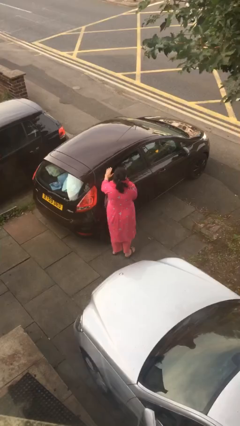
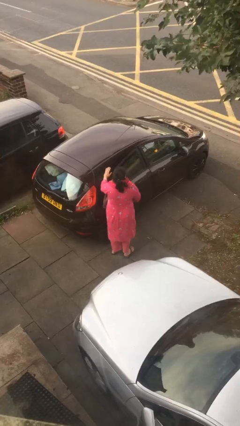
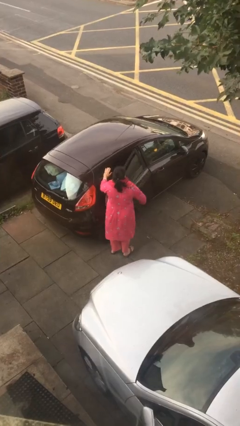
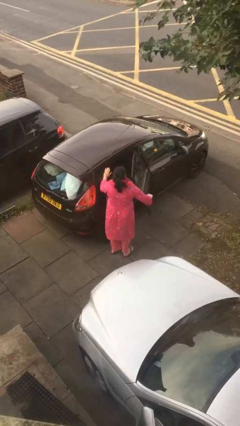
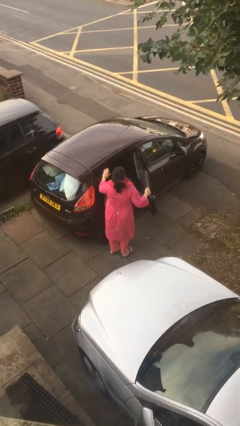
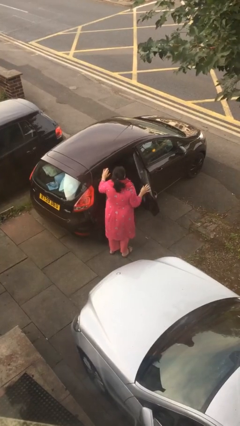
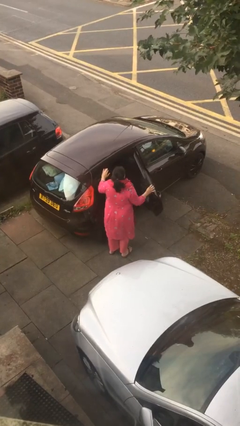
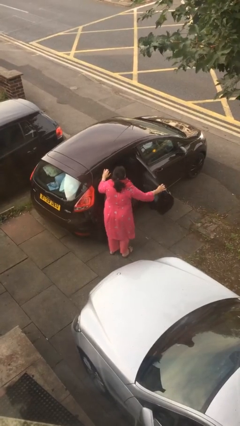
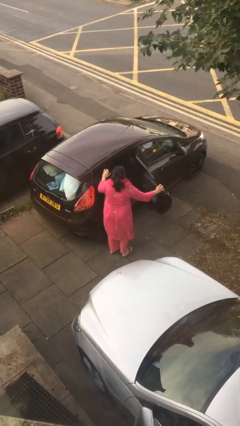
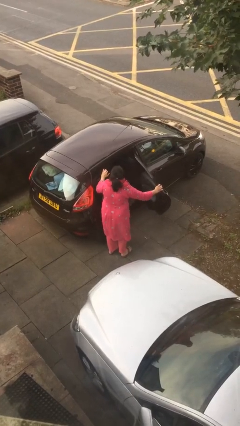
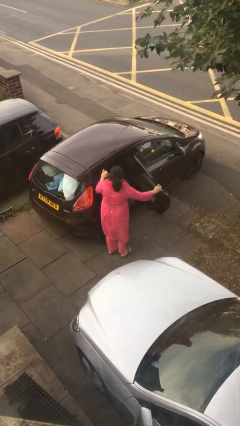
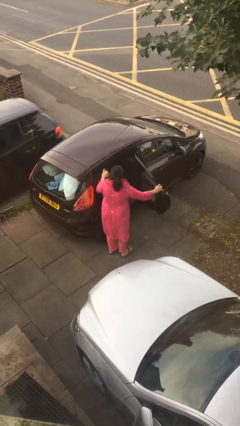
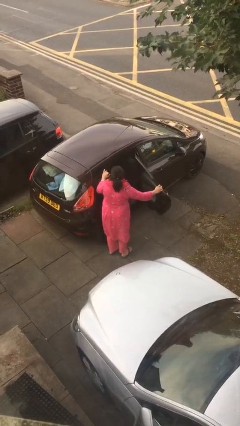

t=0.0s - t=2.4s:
person opens car door

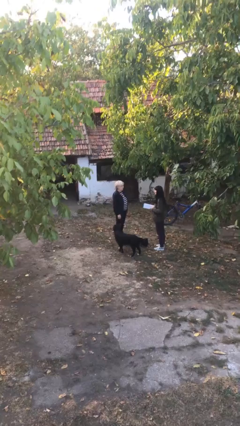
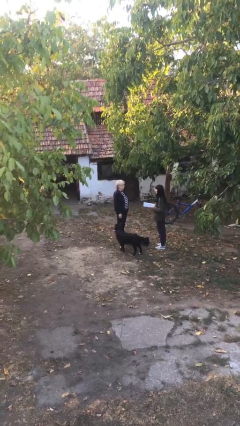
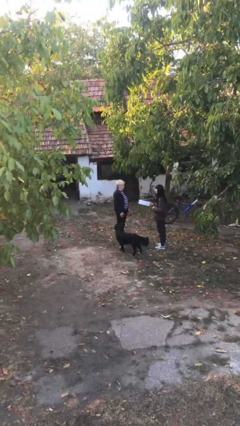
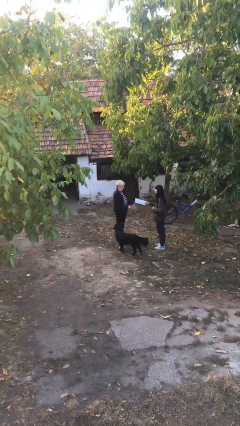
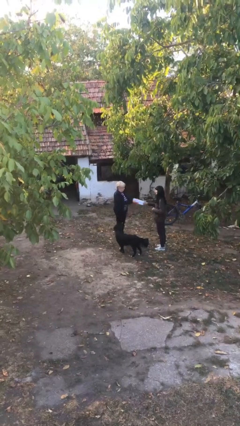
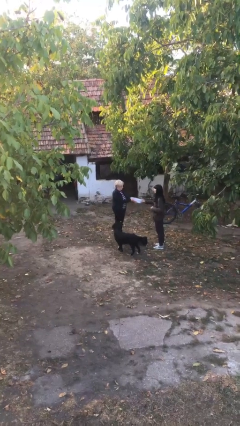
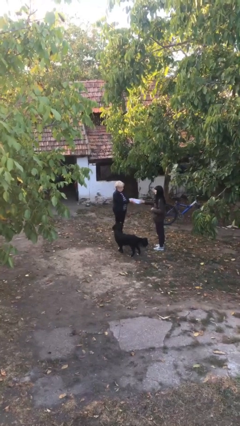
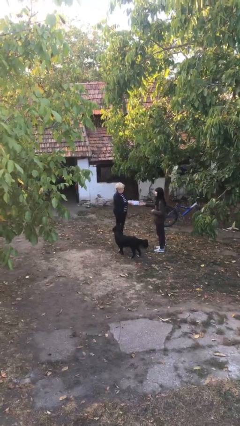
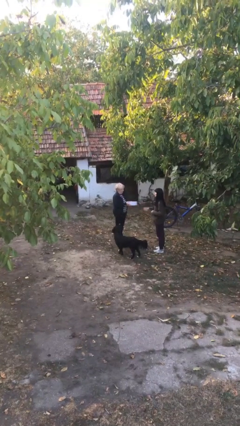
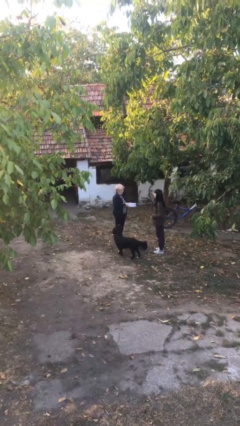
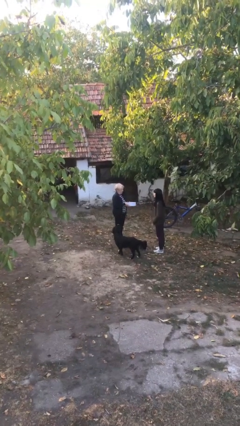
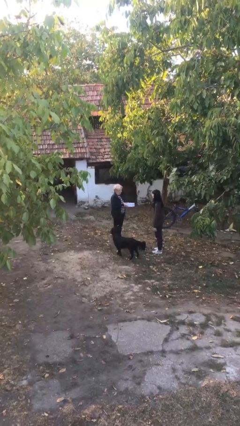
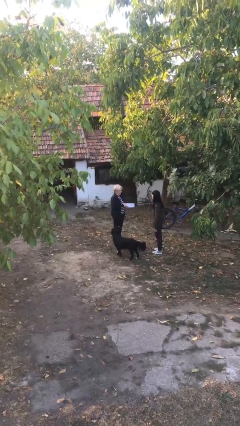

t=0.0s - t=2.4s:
person transfers object to person

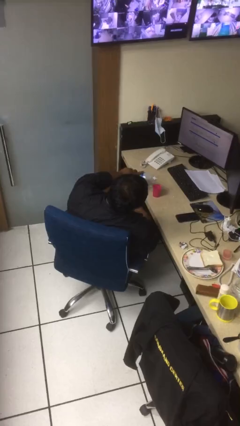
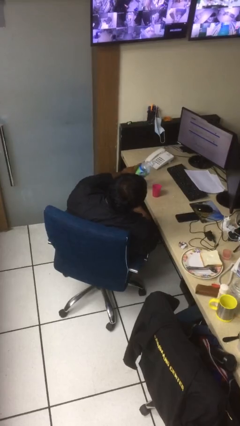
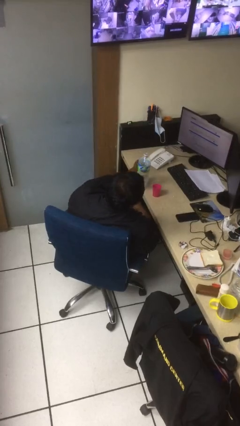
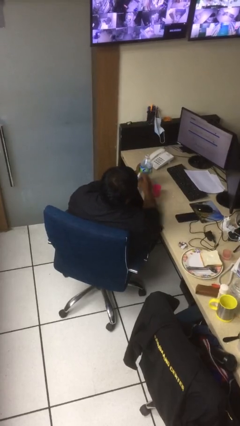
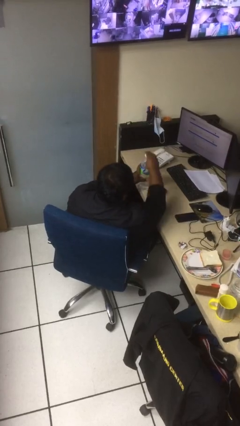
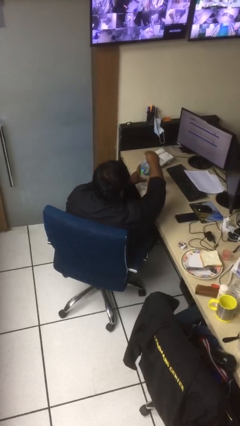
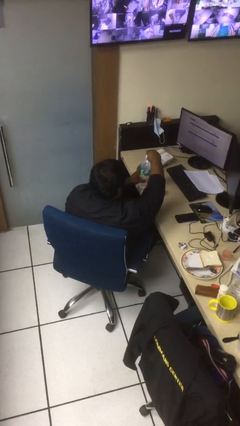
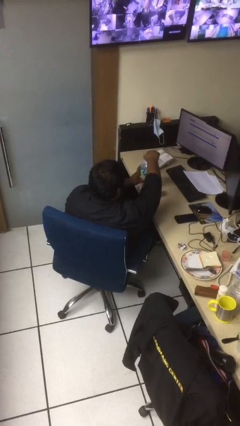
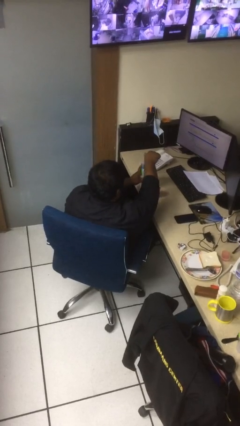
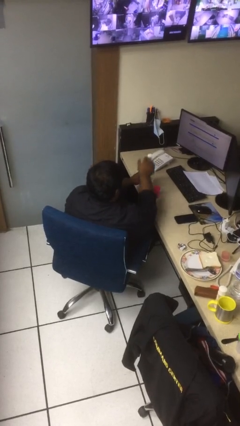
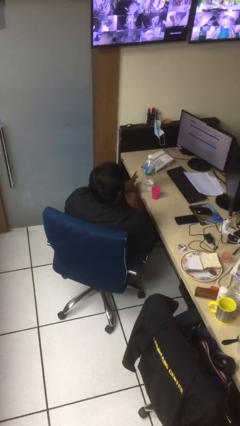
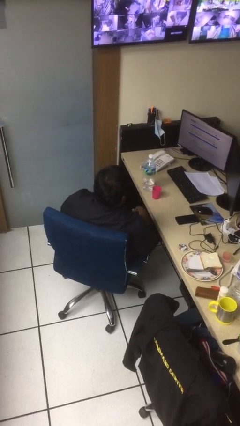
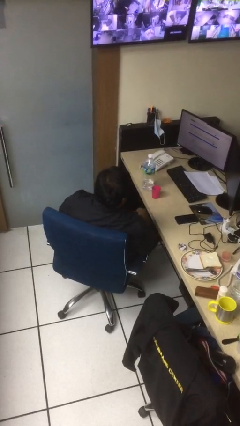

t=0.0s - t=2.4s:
person screws lid to bottle

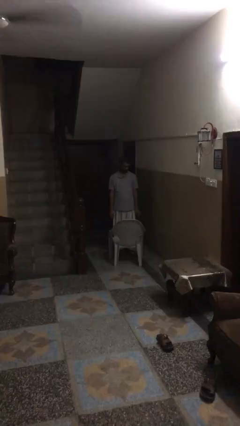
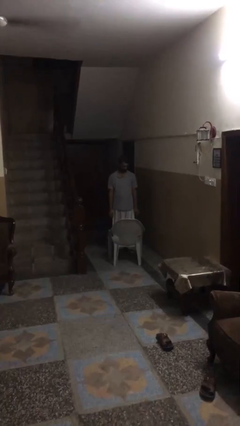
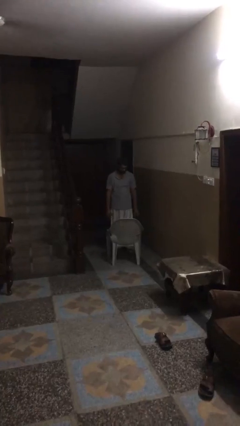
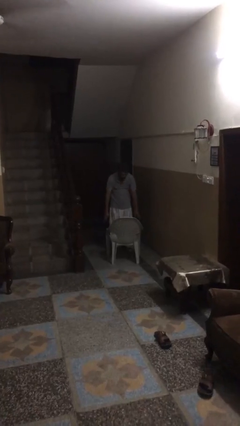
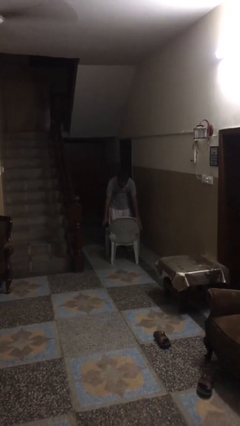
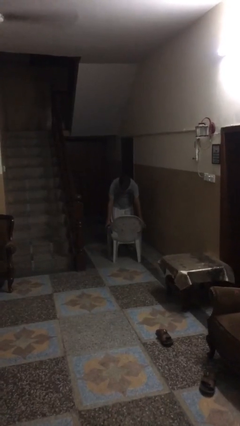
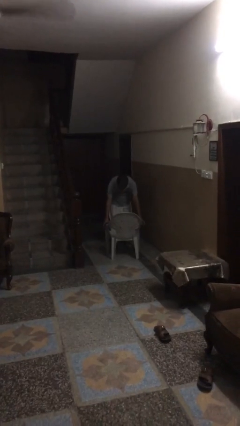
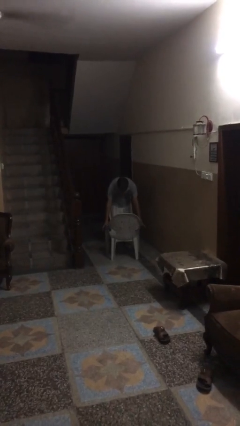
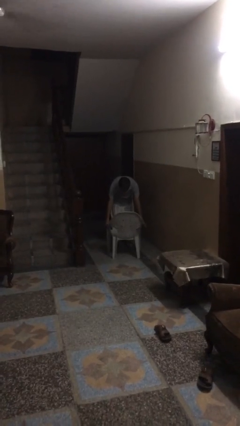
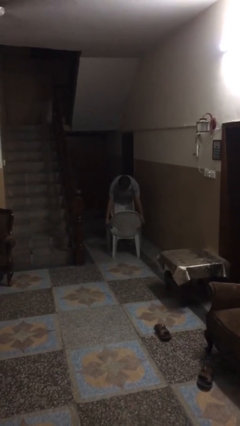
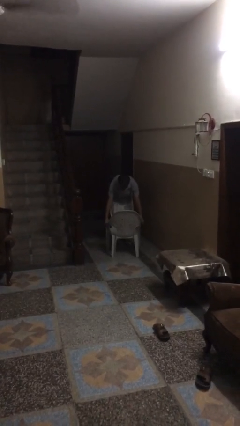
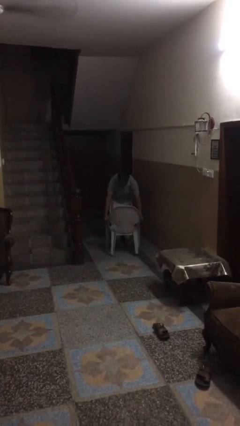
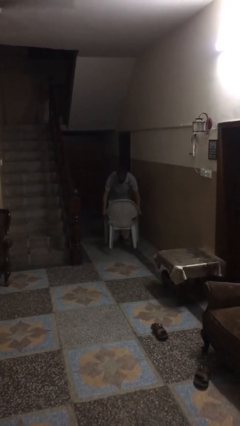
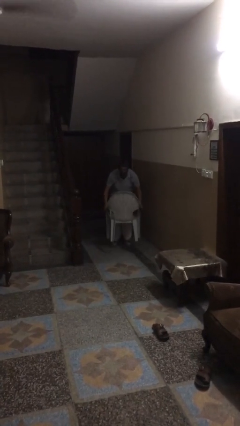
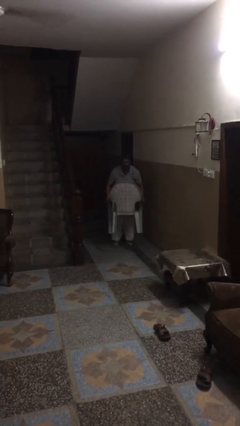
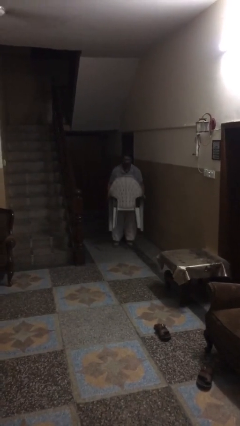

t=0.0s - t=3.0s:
person picks up object from floor

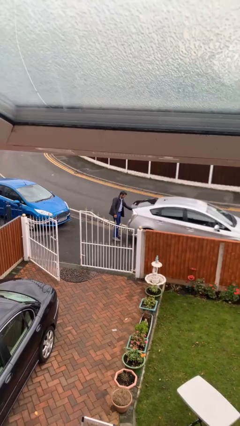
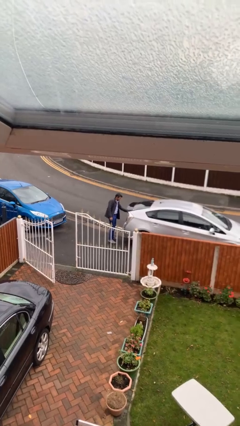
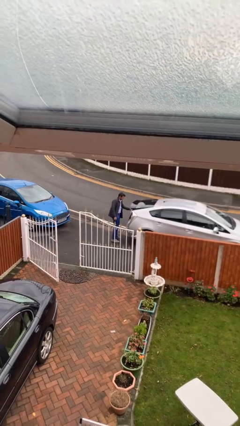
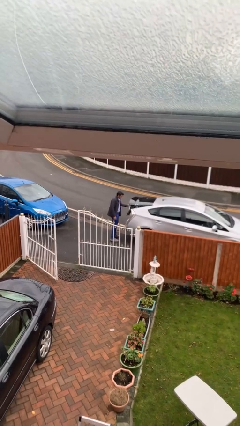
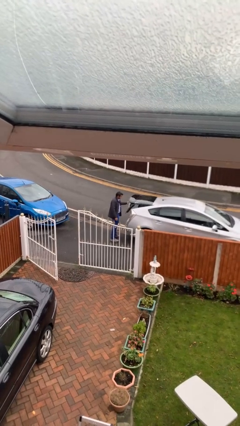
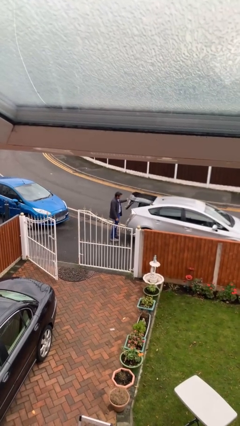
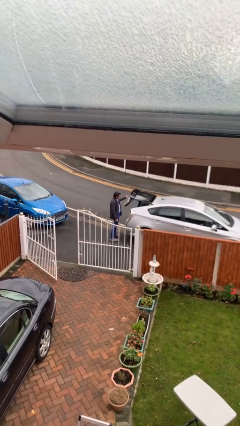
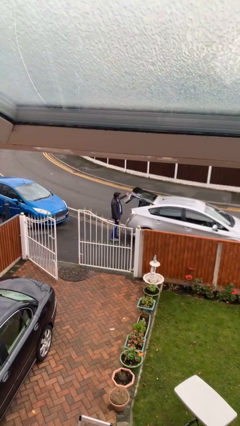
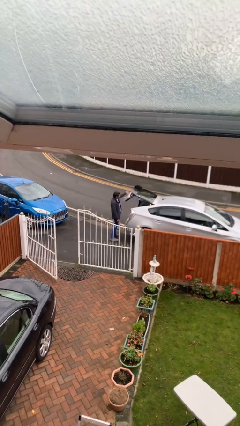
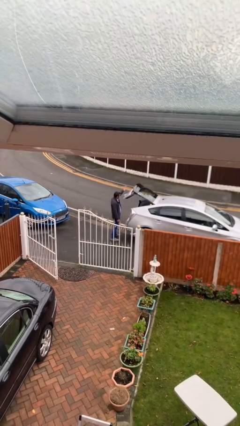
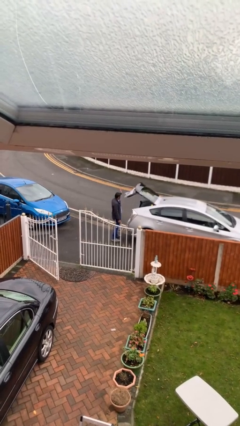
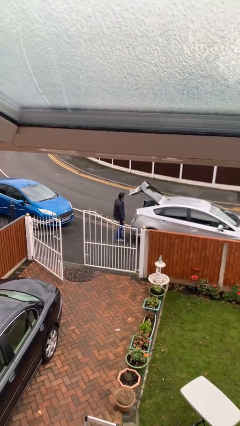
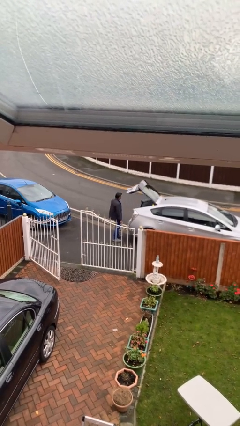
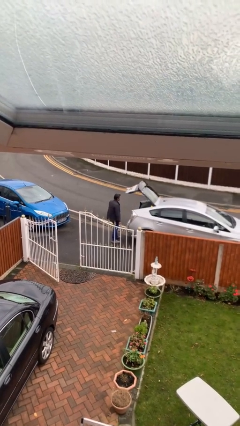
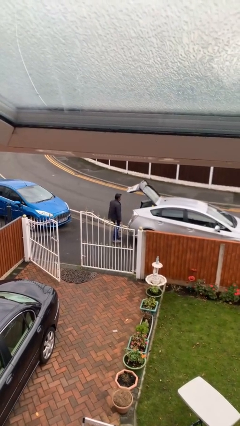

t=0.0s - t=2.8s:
person opens car trunk

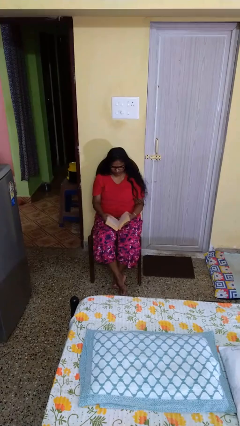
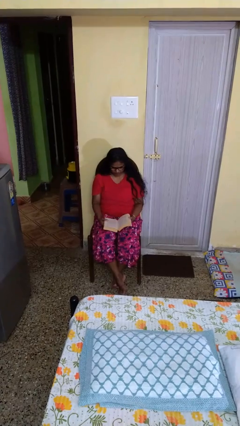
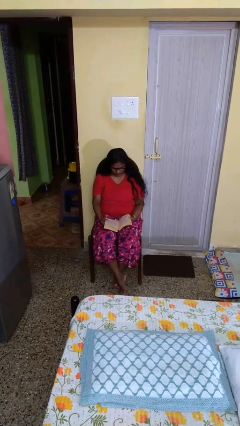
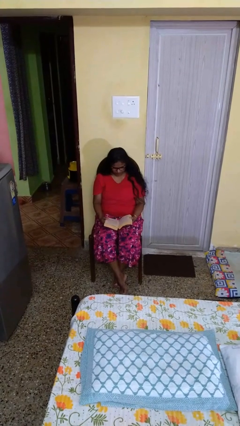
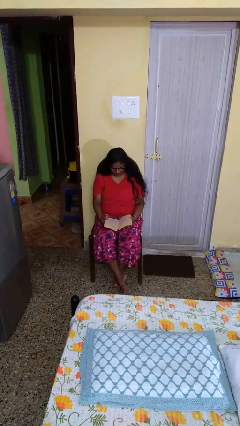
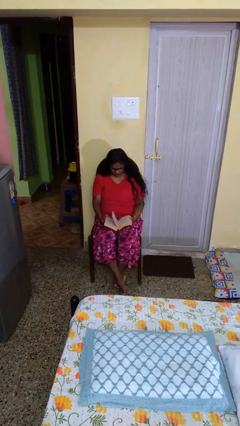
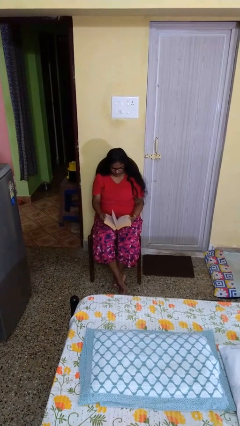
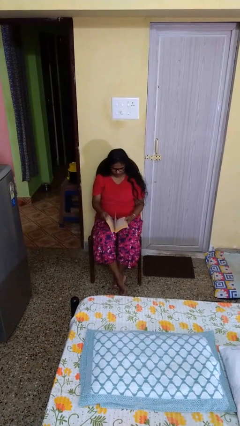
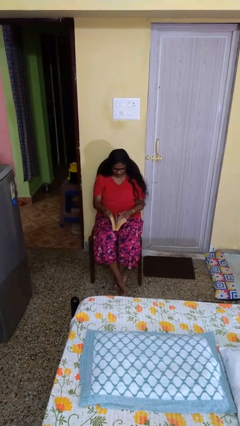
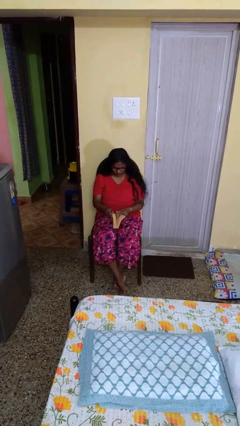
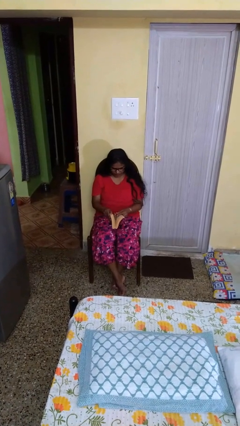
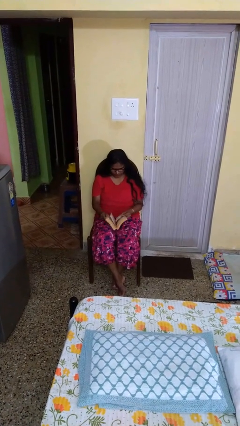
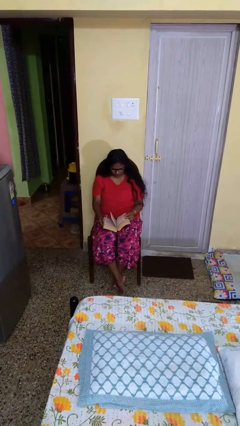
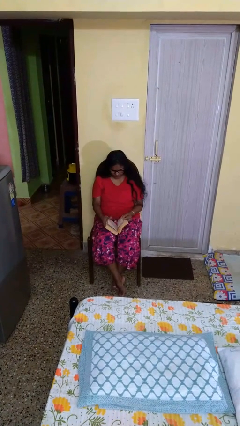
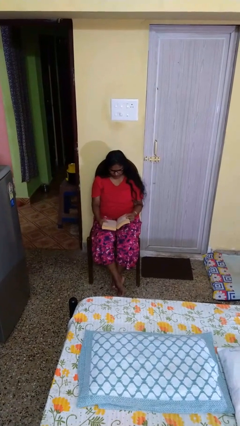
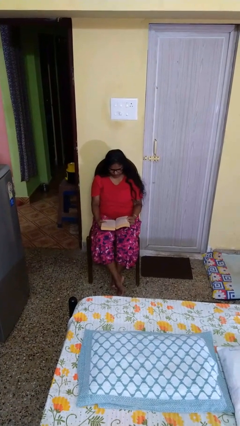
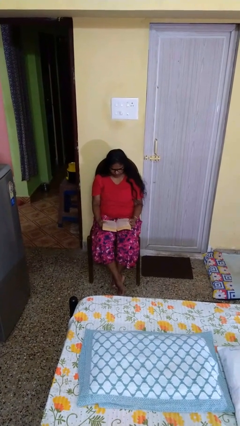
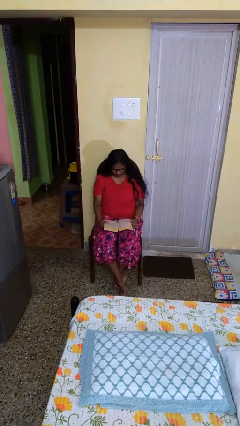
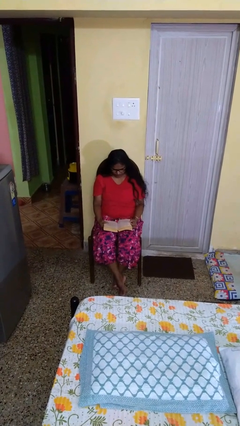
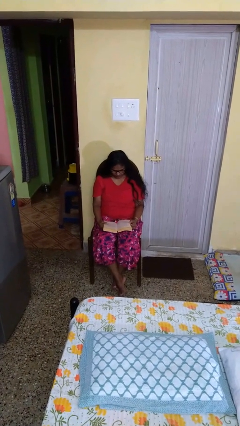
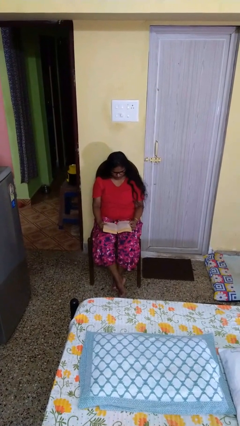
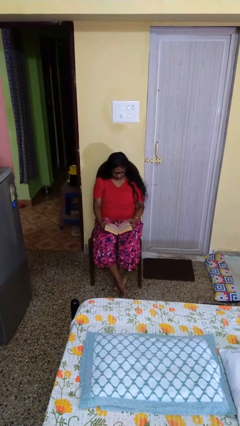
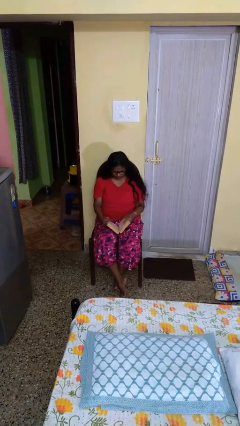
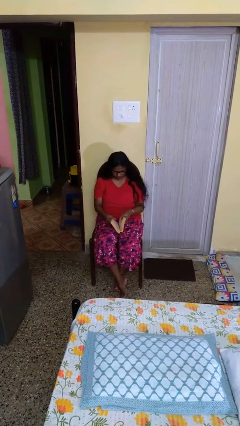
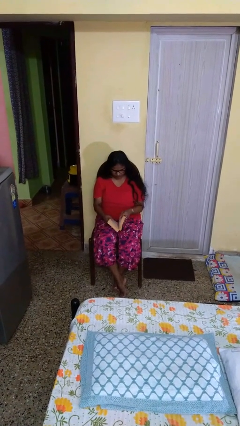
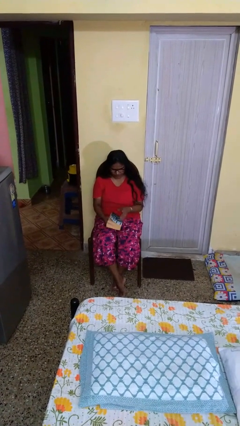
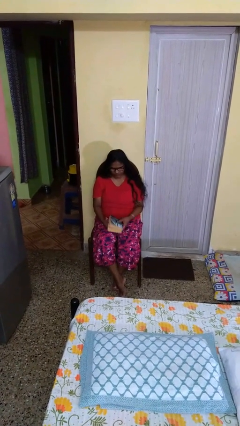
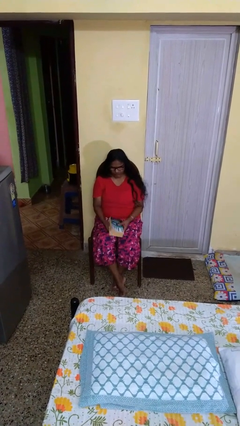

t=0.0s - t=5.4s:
person reads book
